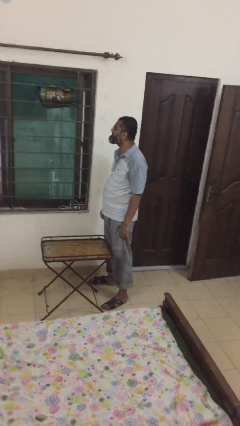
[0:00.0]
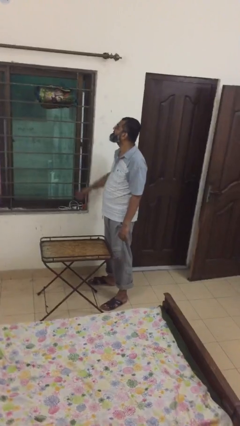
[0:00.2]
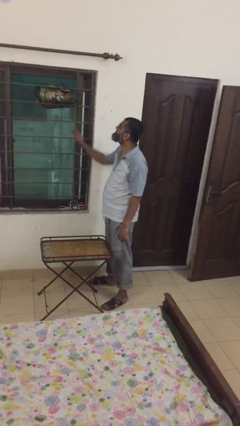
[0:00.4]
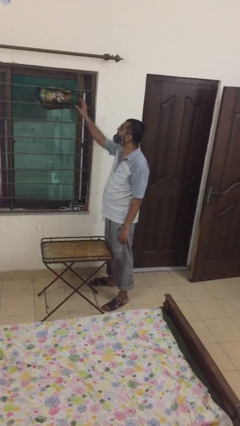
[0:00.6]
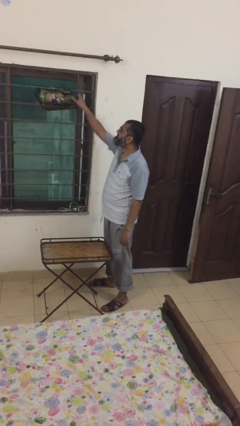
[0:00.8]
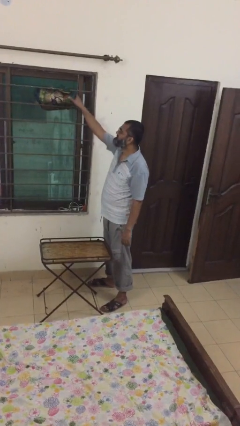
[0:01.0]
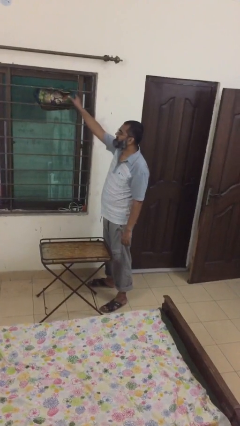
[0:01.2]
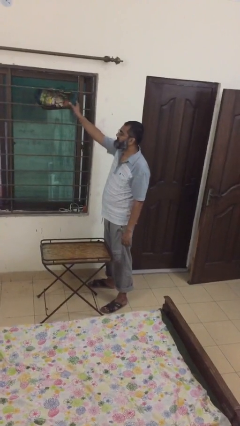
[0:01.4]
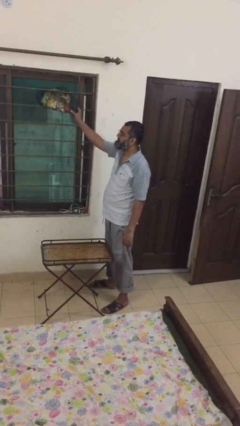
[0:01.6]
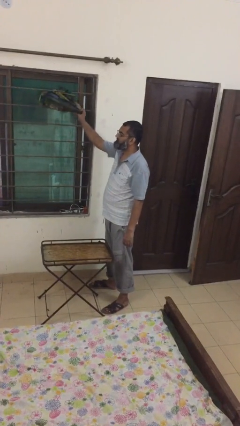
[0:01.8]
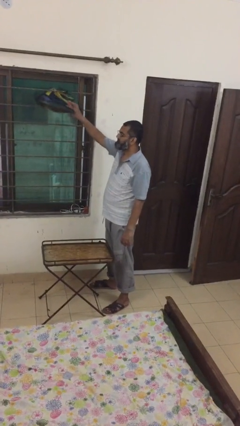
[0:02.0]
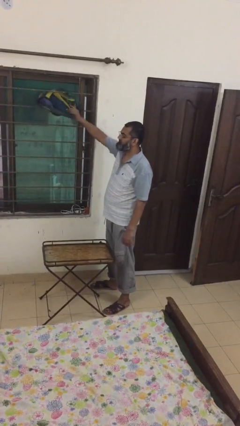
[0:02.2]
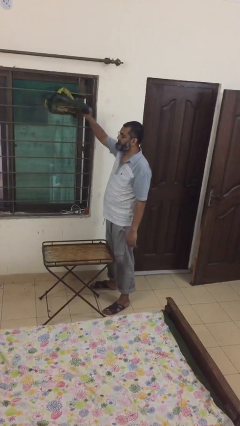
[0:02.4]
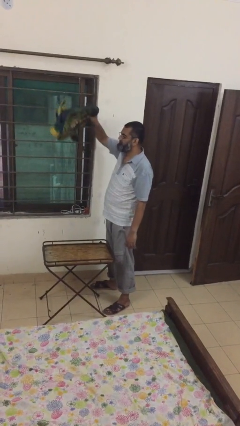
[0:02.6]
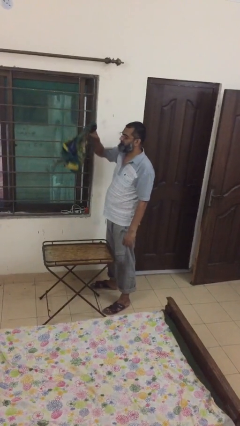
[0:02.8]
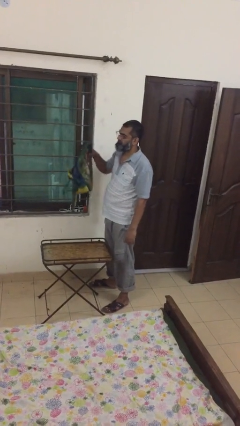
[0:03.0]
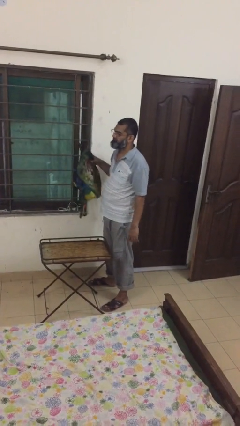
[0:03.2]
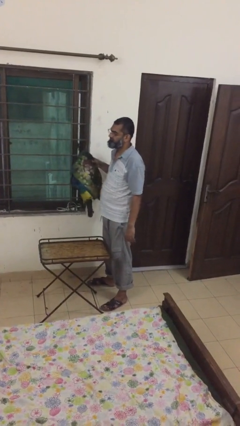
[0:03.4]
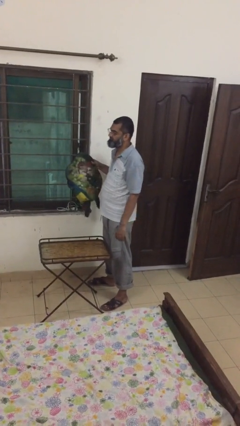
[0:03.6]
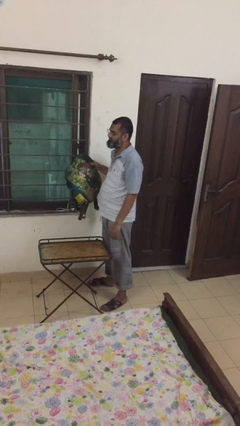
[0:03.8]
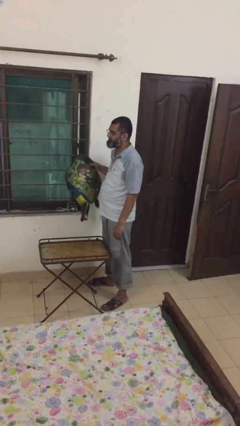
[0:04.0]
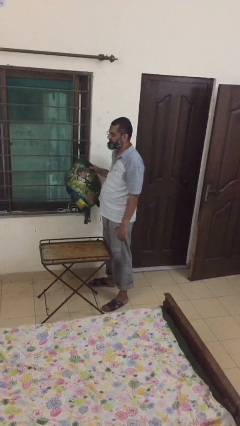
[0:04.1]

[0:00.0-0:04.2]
person picks up object from shelf

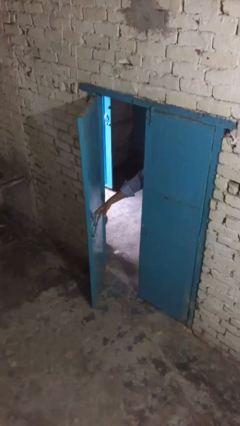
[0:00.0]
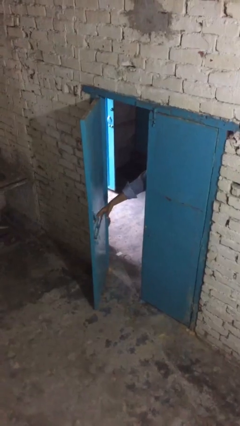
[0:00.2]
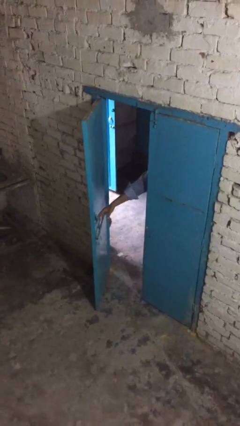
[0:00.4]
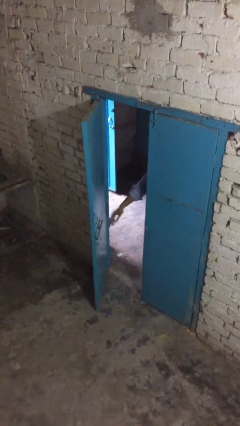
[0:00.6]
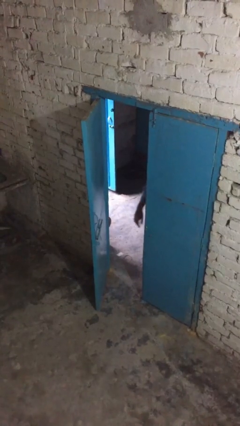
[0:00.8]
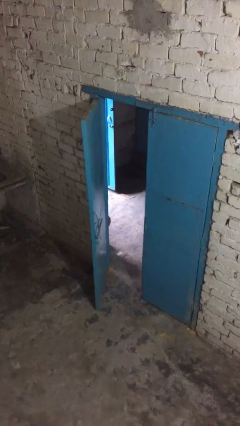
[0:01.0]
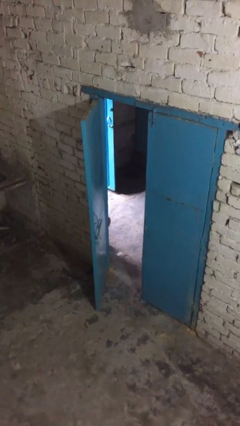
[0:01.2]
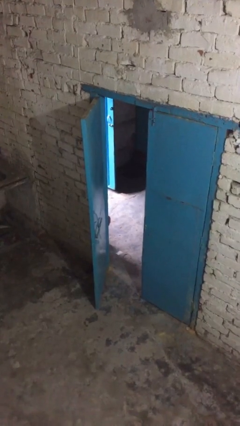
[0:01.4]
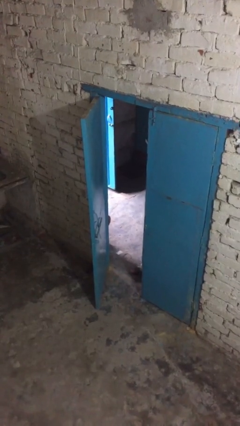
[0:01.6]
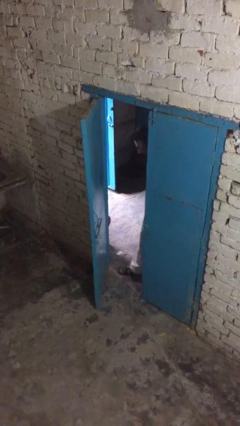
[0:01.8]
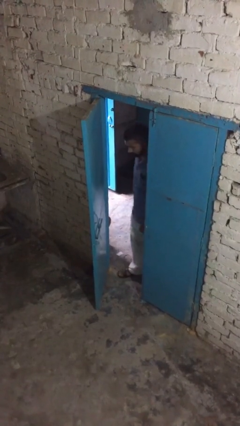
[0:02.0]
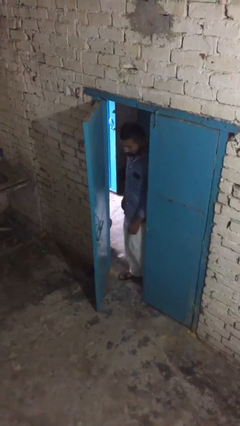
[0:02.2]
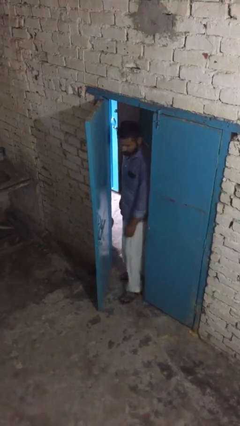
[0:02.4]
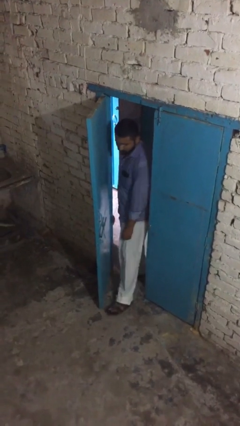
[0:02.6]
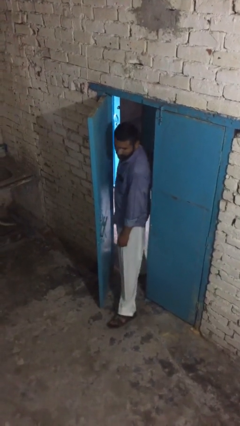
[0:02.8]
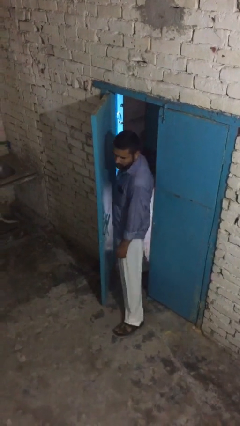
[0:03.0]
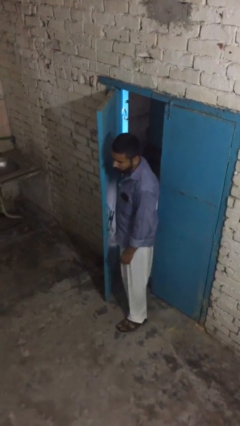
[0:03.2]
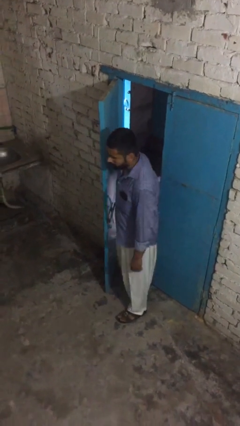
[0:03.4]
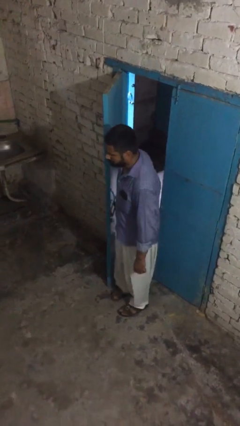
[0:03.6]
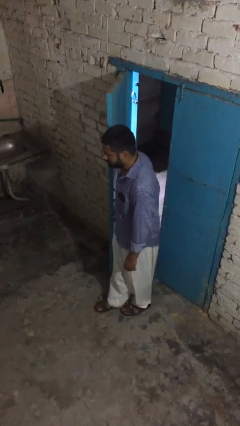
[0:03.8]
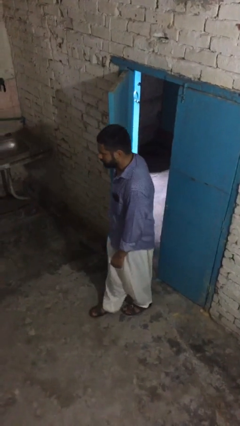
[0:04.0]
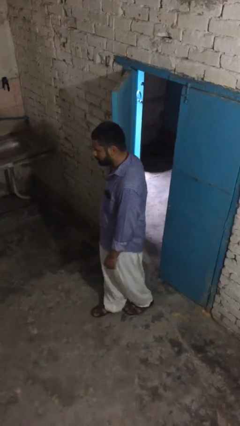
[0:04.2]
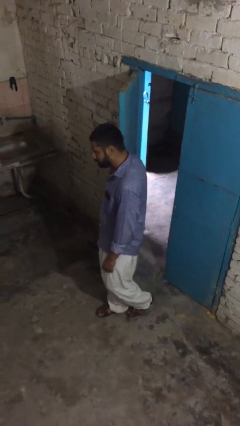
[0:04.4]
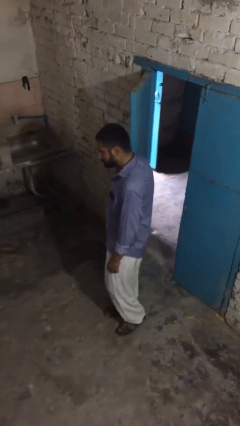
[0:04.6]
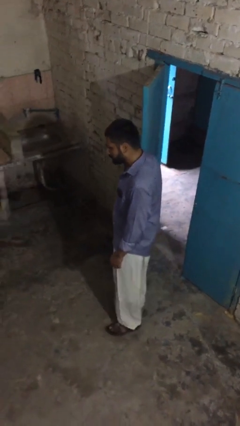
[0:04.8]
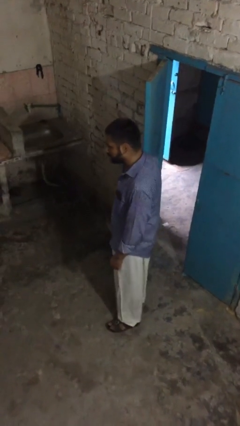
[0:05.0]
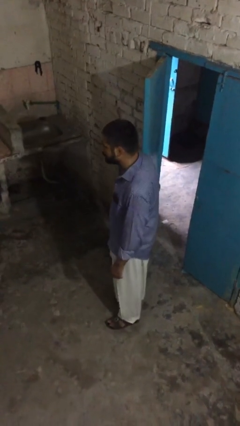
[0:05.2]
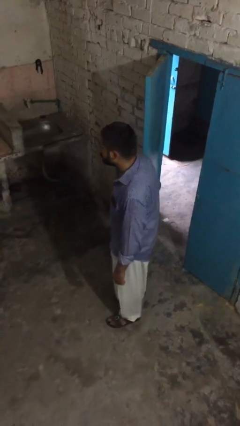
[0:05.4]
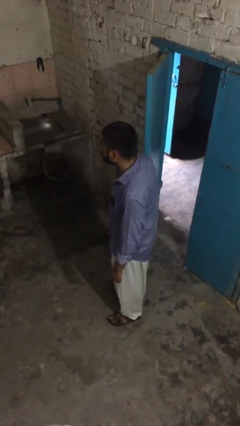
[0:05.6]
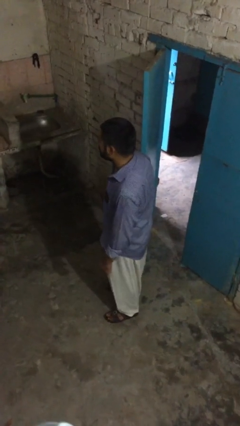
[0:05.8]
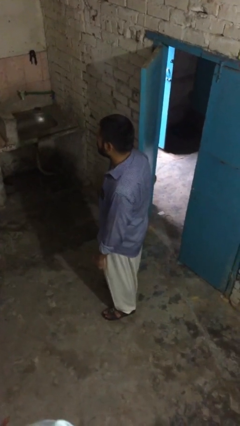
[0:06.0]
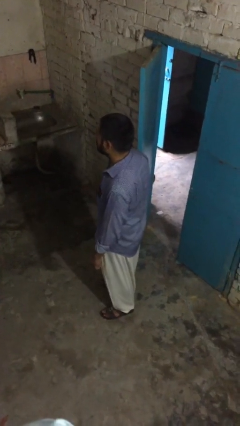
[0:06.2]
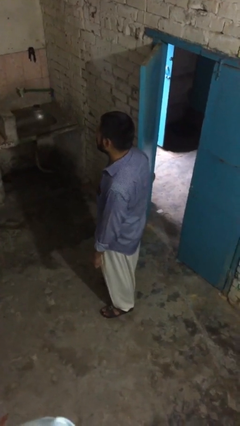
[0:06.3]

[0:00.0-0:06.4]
person enters scene through structure

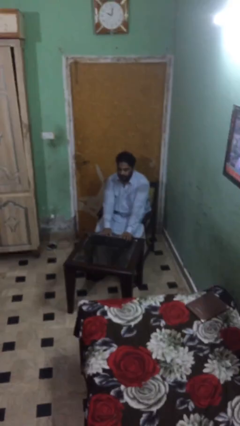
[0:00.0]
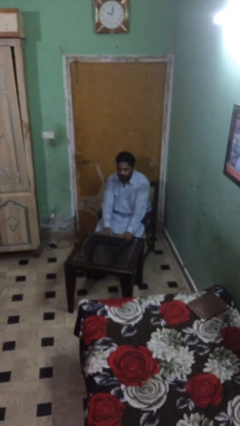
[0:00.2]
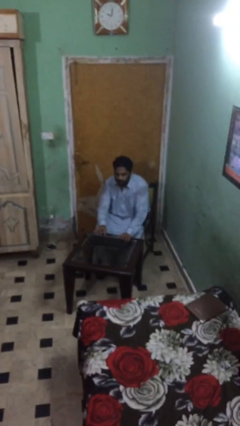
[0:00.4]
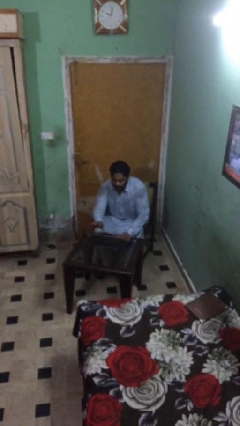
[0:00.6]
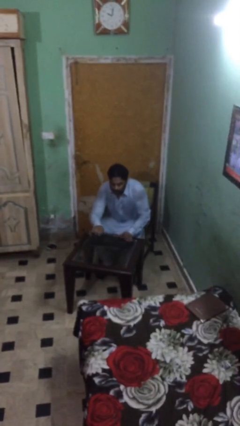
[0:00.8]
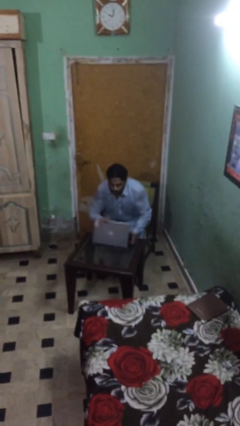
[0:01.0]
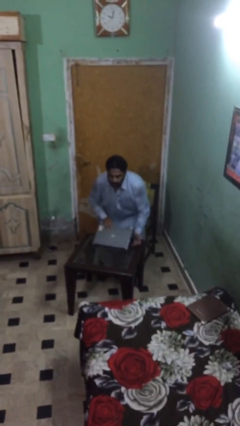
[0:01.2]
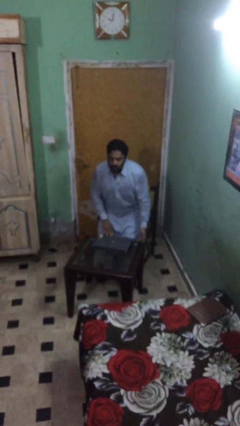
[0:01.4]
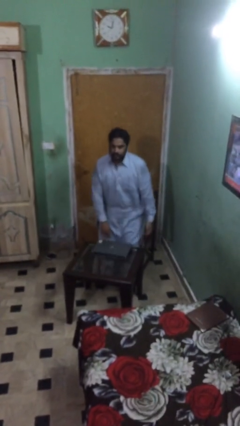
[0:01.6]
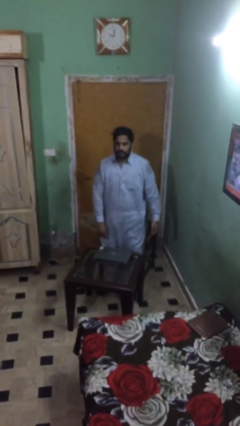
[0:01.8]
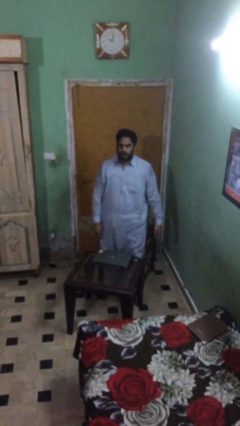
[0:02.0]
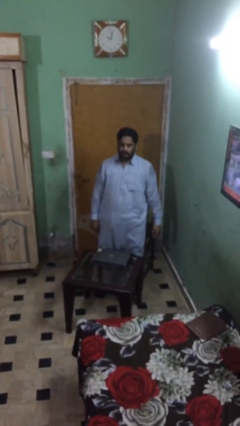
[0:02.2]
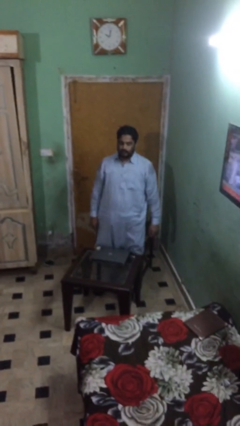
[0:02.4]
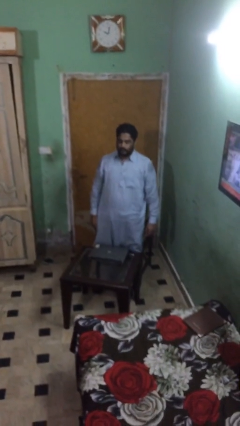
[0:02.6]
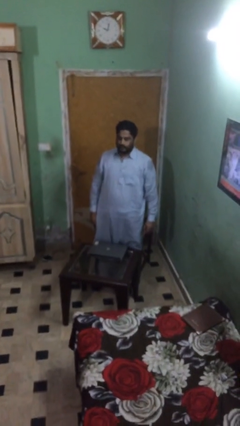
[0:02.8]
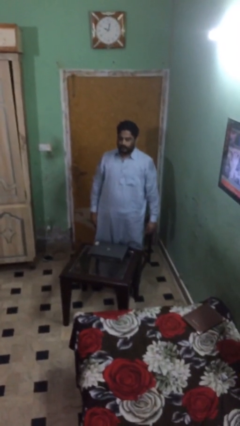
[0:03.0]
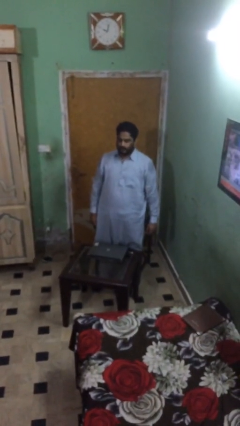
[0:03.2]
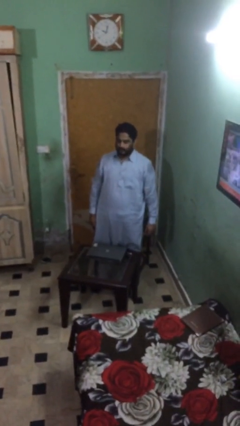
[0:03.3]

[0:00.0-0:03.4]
person stands up

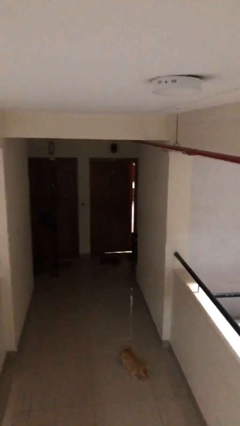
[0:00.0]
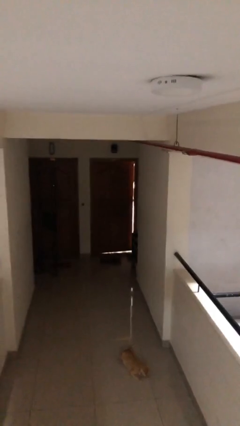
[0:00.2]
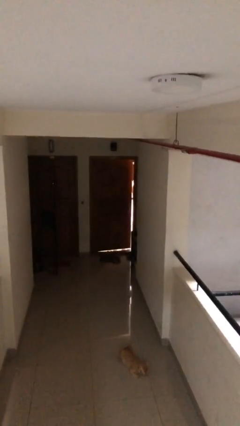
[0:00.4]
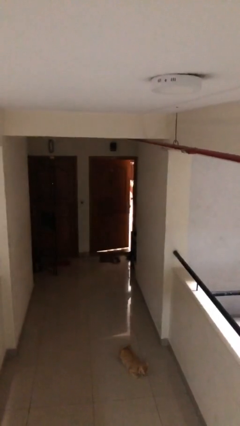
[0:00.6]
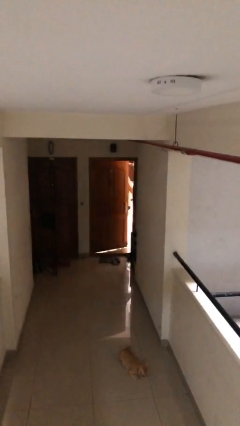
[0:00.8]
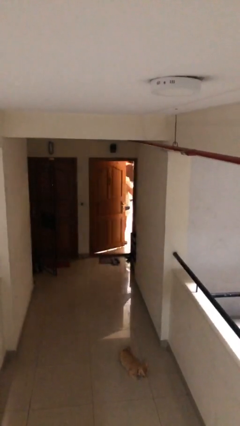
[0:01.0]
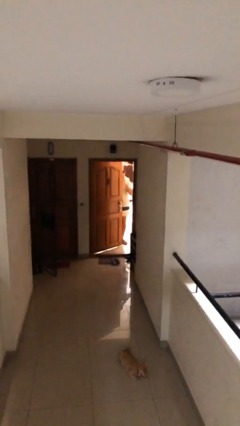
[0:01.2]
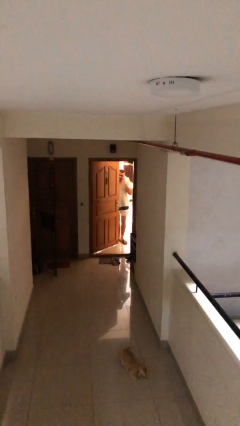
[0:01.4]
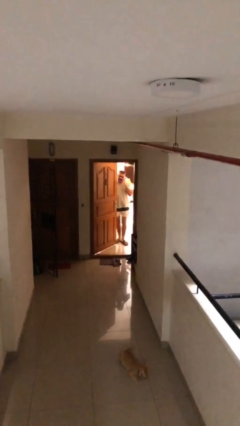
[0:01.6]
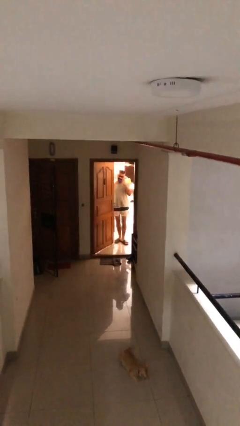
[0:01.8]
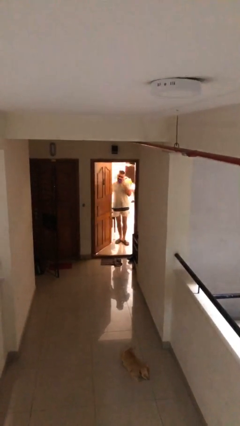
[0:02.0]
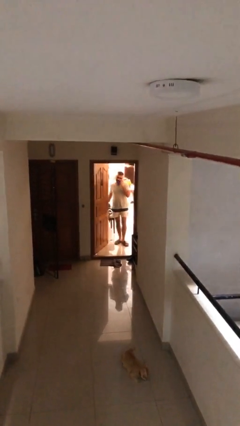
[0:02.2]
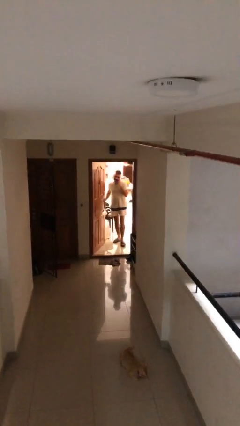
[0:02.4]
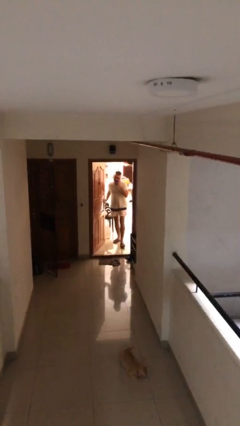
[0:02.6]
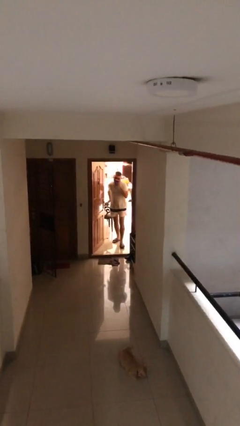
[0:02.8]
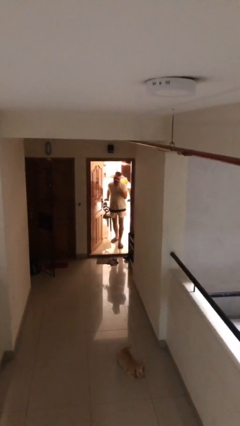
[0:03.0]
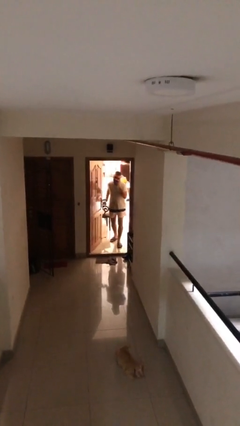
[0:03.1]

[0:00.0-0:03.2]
person opens facility door

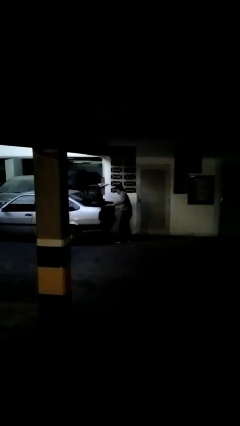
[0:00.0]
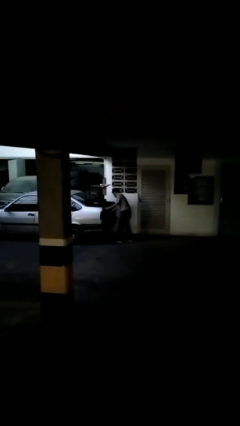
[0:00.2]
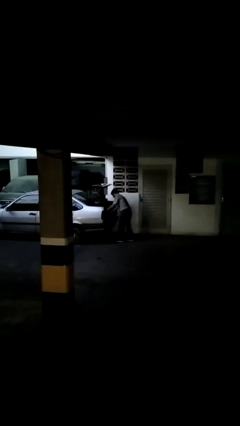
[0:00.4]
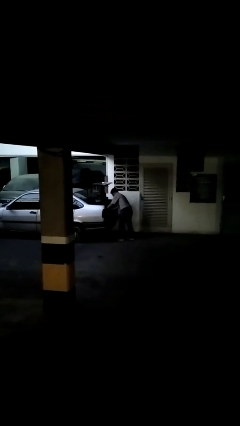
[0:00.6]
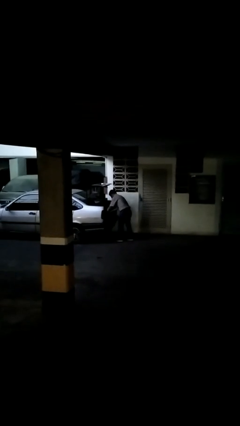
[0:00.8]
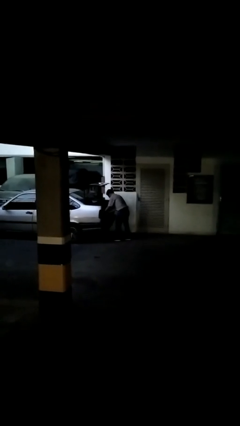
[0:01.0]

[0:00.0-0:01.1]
person loads car
